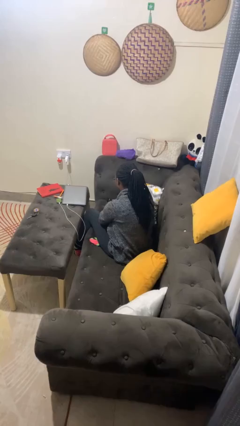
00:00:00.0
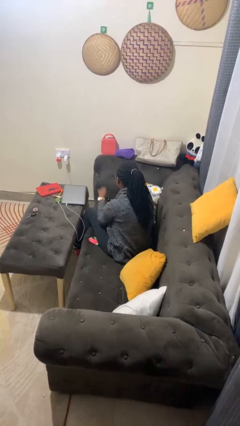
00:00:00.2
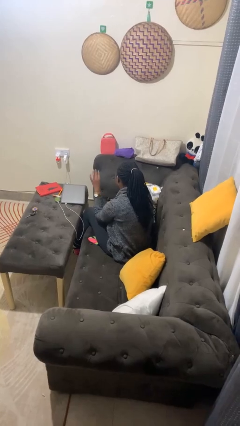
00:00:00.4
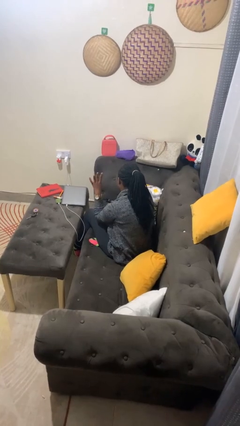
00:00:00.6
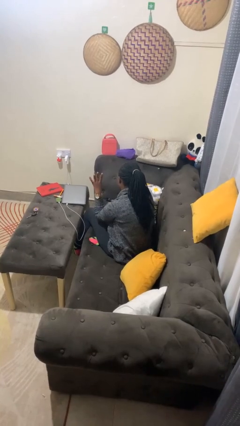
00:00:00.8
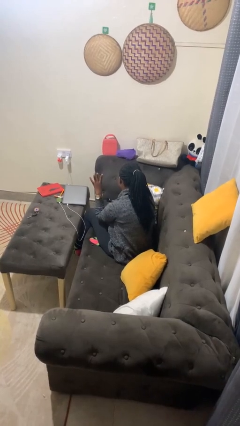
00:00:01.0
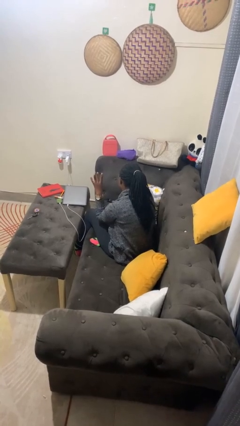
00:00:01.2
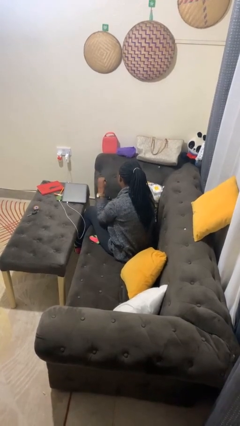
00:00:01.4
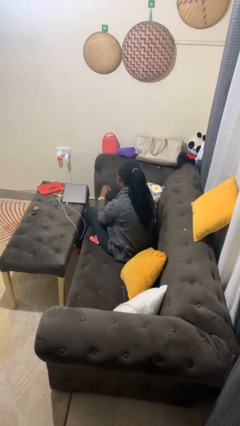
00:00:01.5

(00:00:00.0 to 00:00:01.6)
person gestures number four

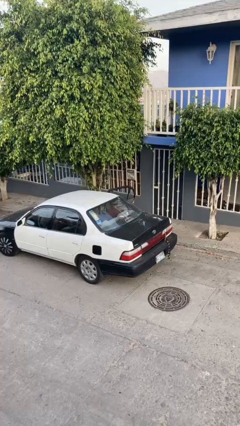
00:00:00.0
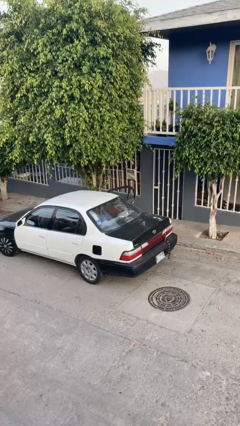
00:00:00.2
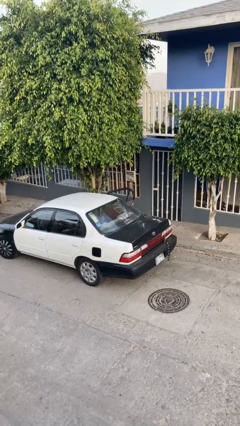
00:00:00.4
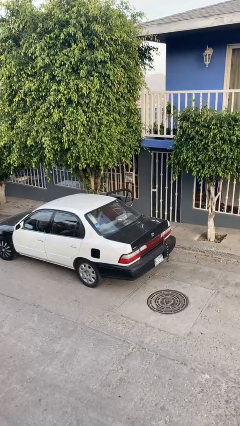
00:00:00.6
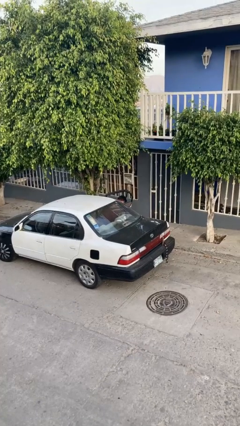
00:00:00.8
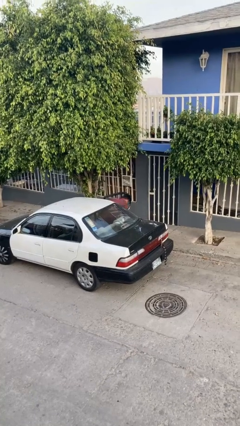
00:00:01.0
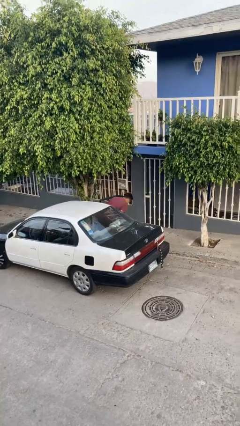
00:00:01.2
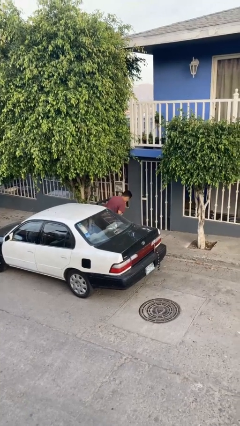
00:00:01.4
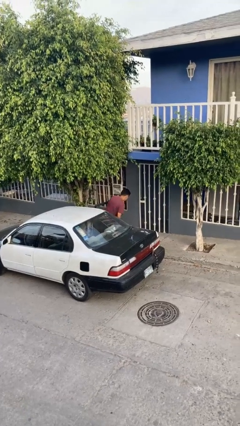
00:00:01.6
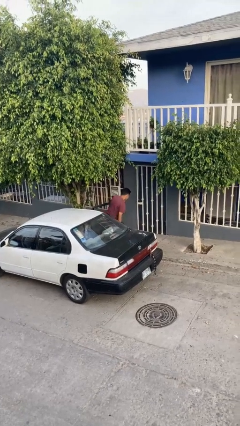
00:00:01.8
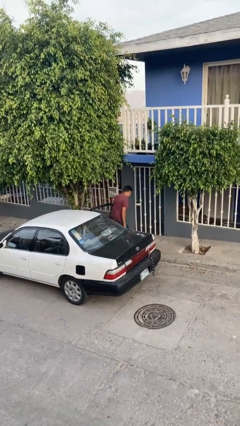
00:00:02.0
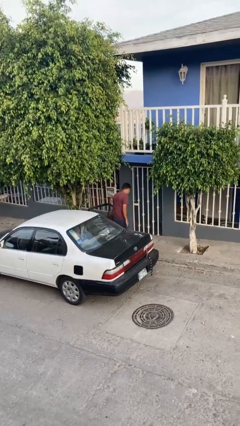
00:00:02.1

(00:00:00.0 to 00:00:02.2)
person exits car

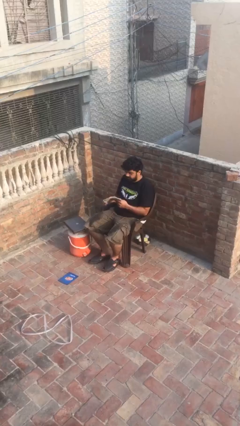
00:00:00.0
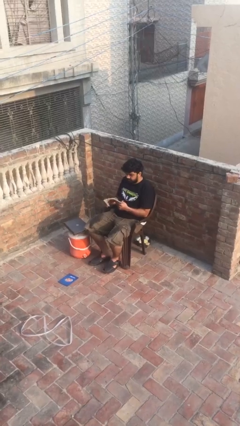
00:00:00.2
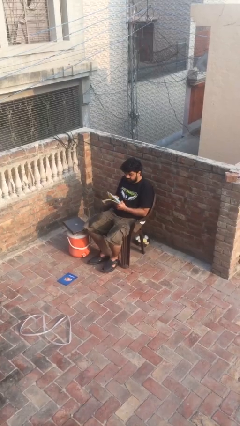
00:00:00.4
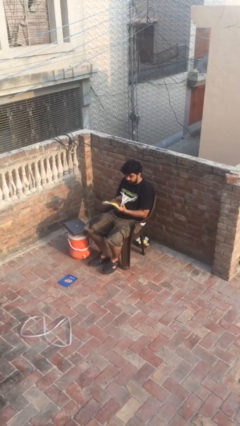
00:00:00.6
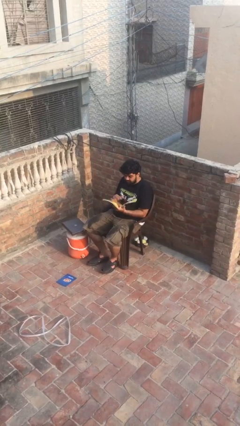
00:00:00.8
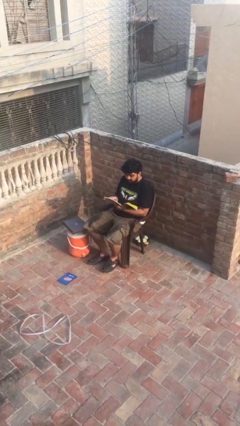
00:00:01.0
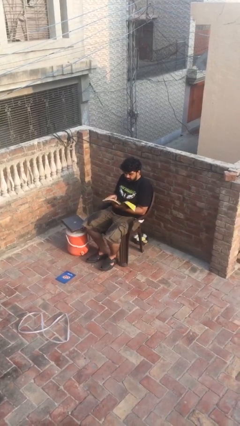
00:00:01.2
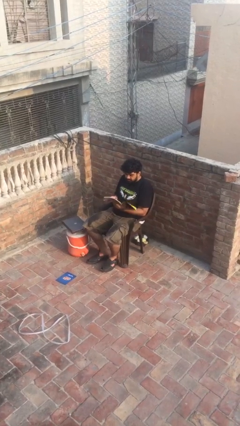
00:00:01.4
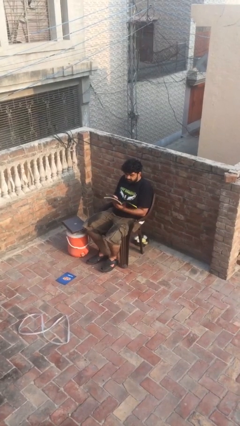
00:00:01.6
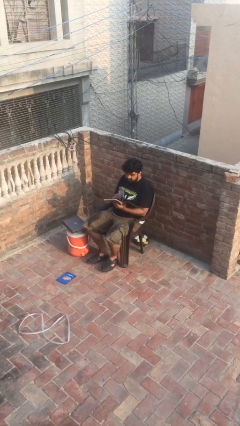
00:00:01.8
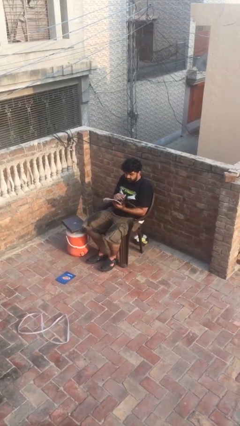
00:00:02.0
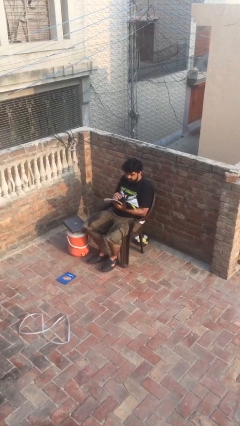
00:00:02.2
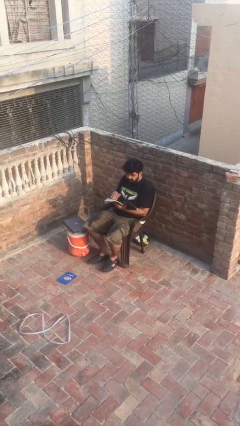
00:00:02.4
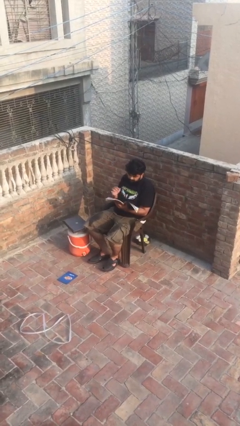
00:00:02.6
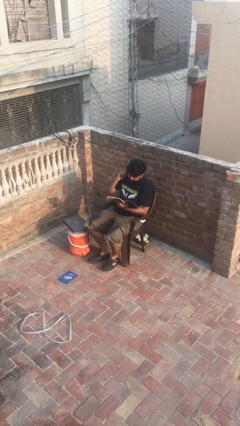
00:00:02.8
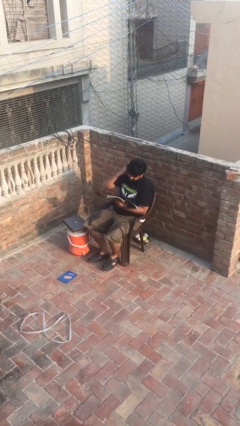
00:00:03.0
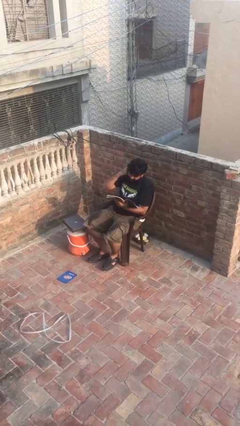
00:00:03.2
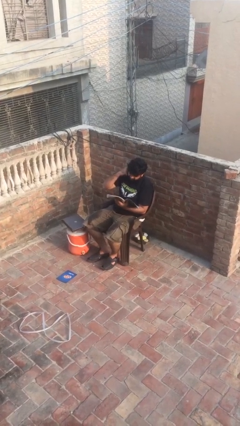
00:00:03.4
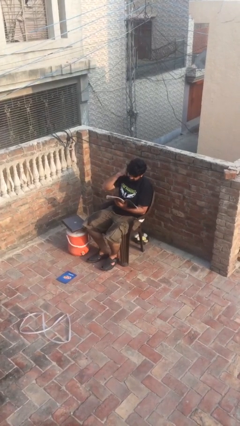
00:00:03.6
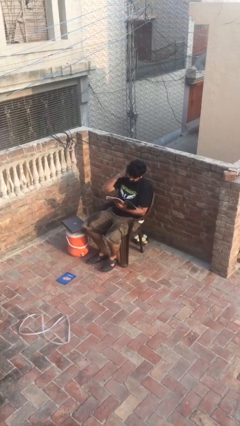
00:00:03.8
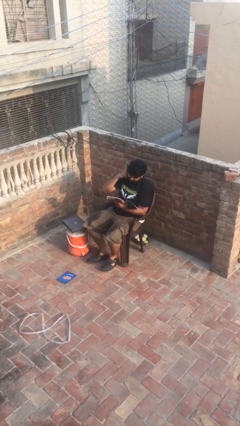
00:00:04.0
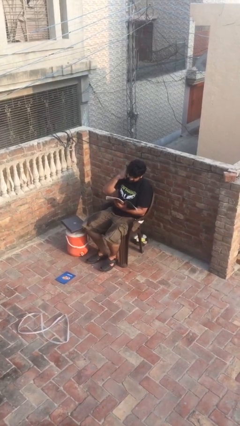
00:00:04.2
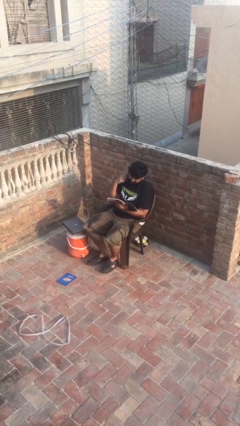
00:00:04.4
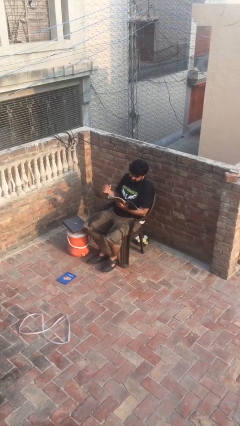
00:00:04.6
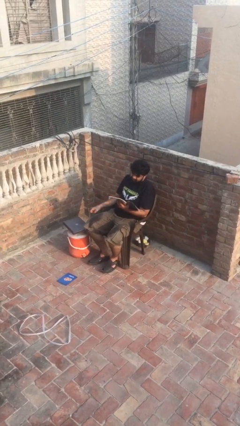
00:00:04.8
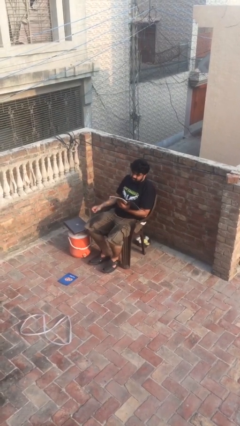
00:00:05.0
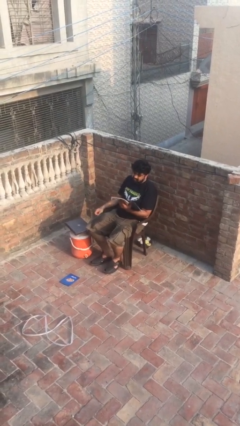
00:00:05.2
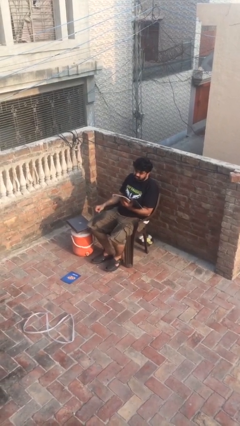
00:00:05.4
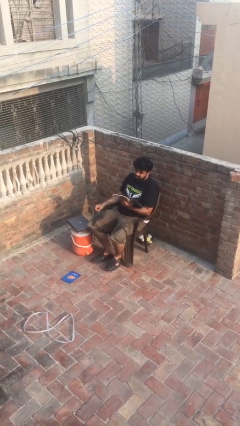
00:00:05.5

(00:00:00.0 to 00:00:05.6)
person reads document

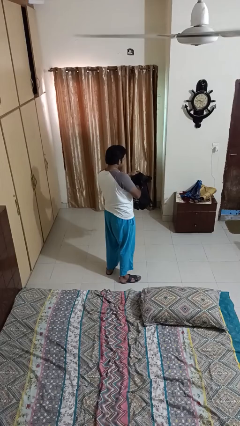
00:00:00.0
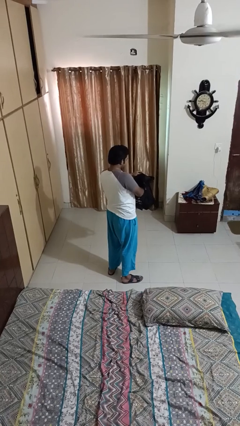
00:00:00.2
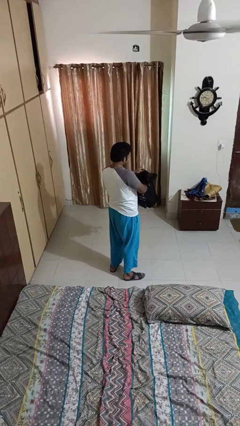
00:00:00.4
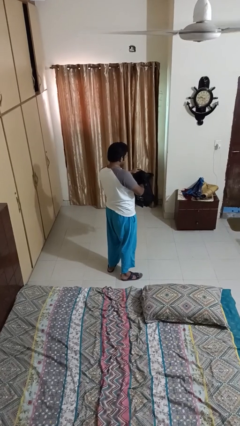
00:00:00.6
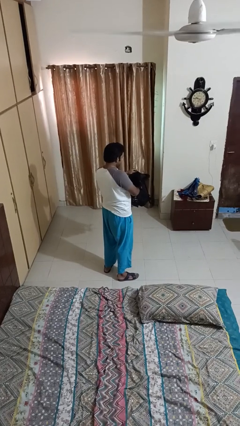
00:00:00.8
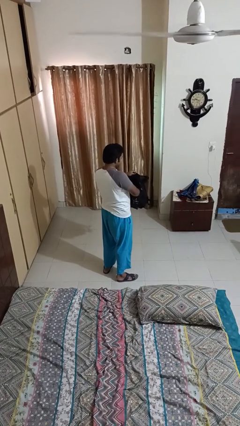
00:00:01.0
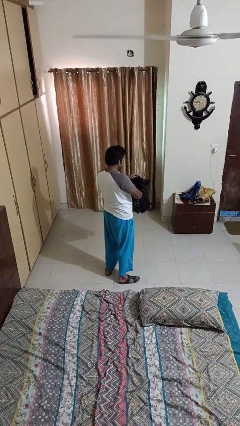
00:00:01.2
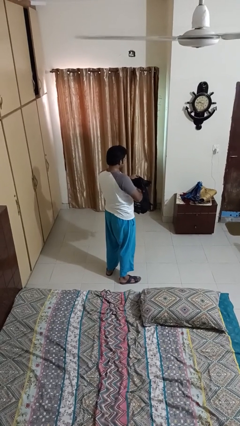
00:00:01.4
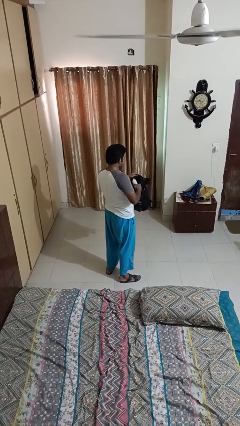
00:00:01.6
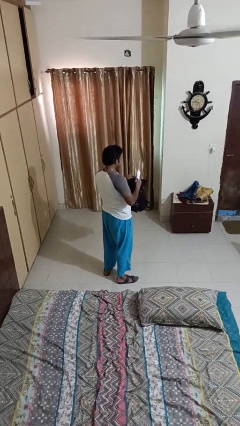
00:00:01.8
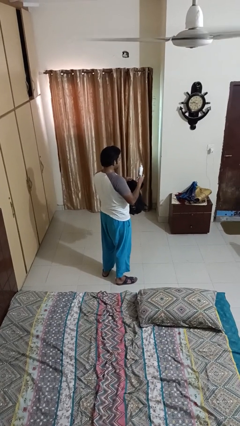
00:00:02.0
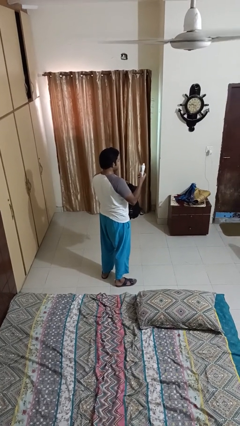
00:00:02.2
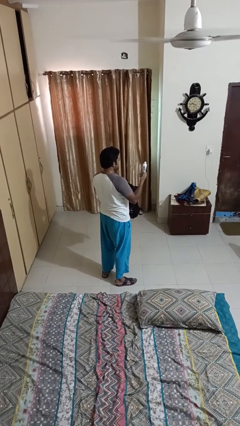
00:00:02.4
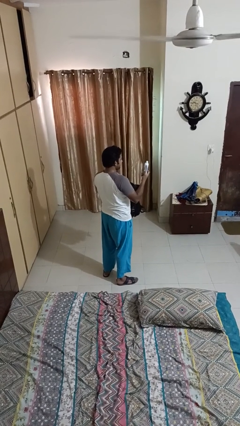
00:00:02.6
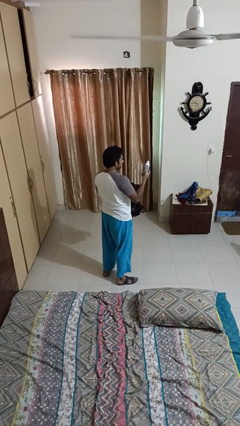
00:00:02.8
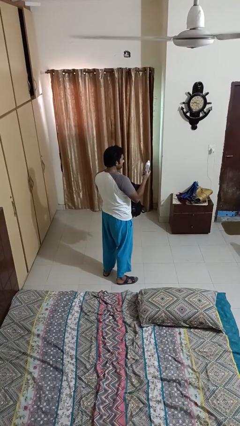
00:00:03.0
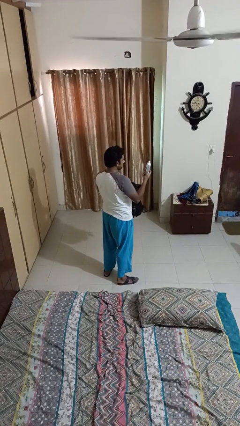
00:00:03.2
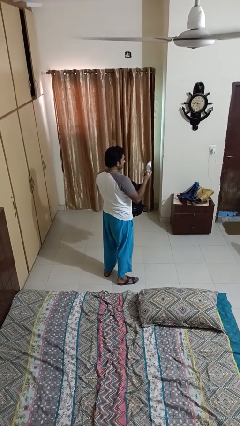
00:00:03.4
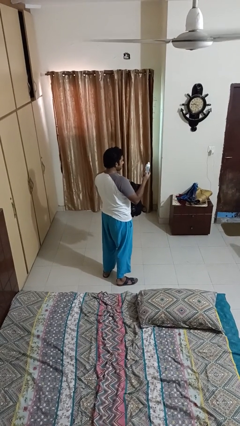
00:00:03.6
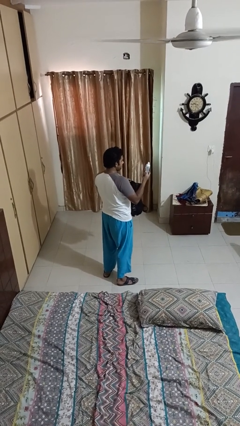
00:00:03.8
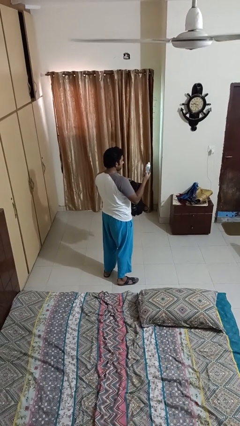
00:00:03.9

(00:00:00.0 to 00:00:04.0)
person lies down on couch

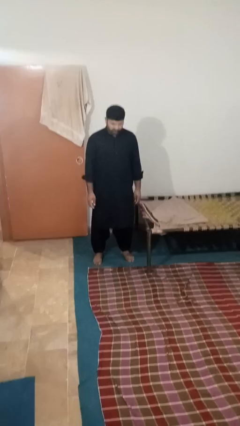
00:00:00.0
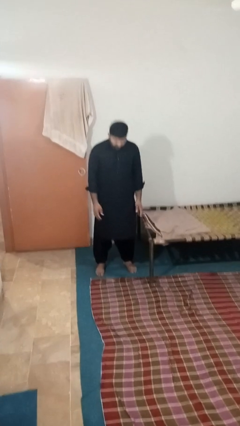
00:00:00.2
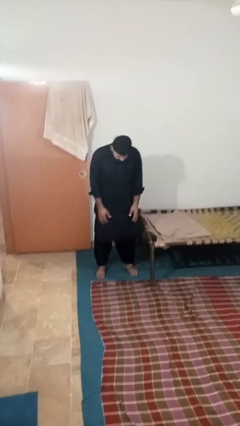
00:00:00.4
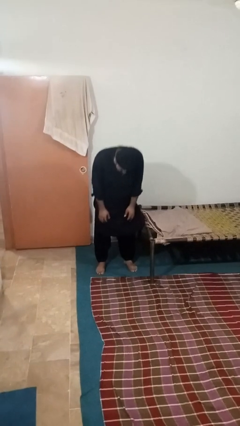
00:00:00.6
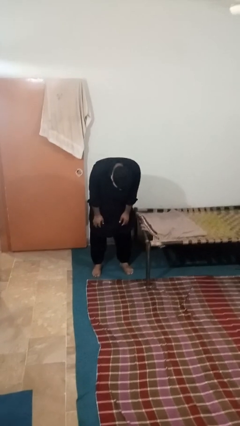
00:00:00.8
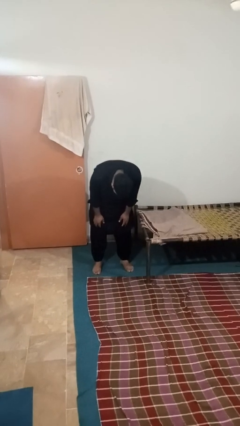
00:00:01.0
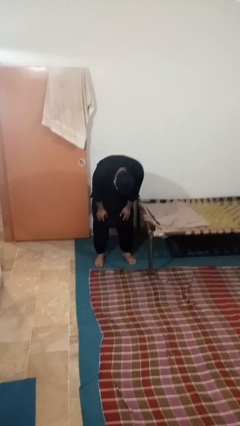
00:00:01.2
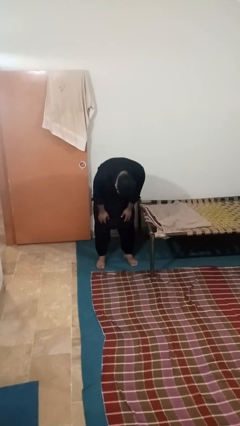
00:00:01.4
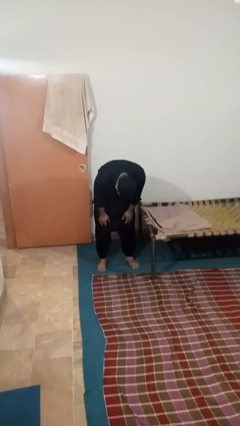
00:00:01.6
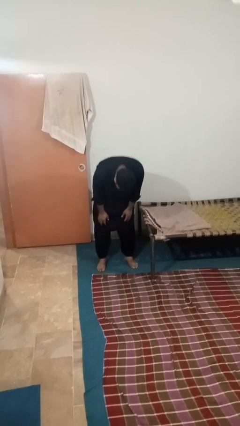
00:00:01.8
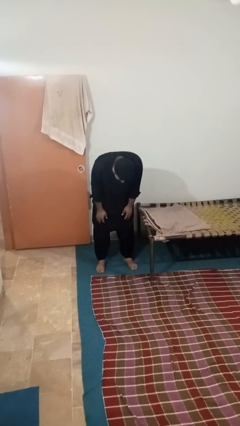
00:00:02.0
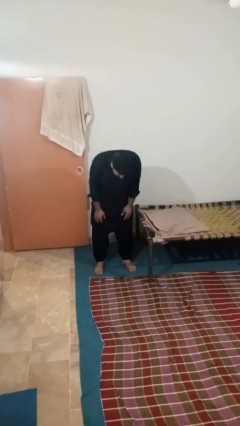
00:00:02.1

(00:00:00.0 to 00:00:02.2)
person bows

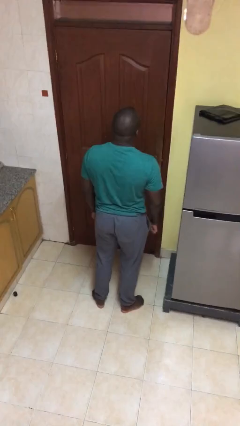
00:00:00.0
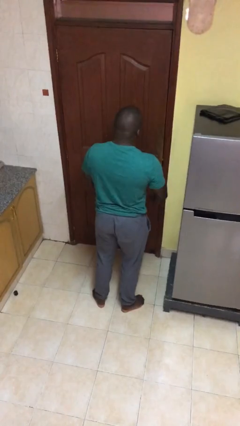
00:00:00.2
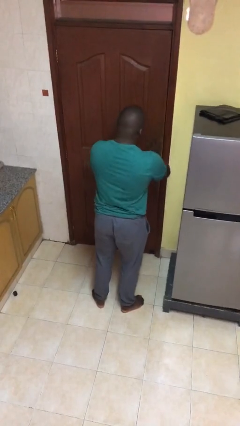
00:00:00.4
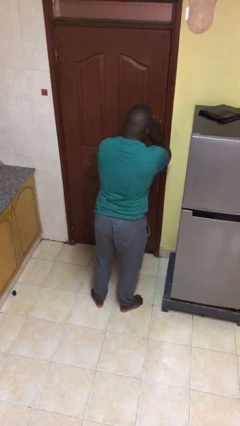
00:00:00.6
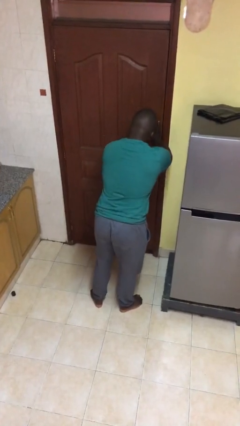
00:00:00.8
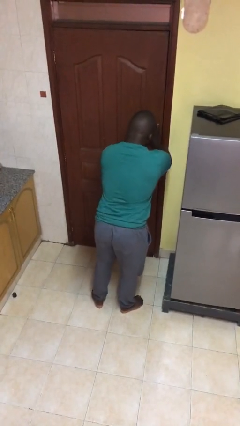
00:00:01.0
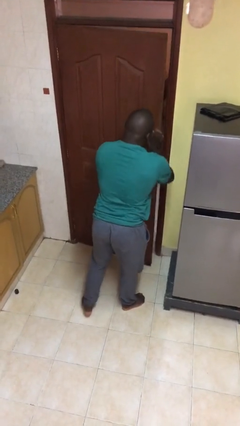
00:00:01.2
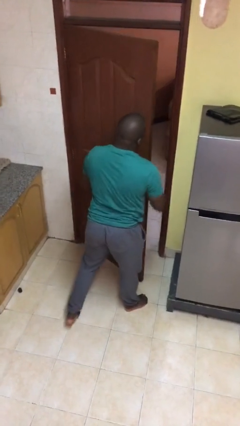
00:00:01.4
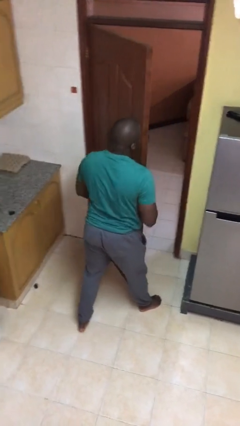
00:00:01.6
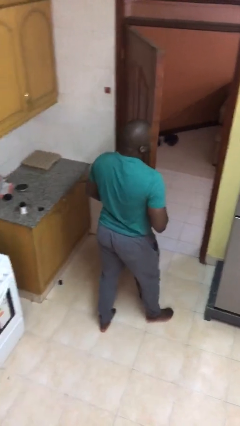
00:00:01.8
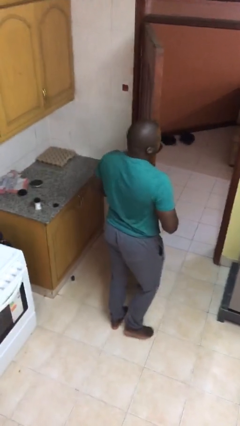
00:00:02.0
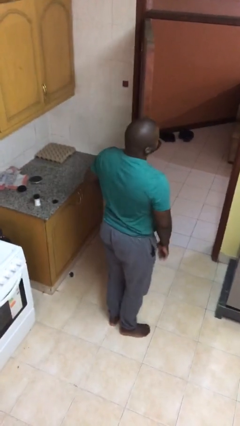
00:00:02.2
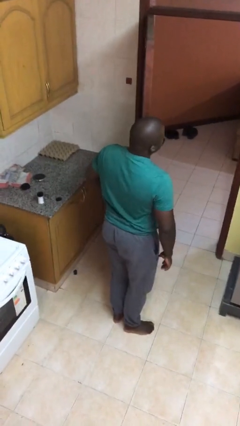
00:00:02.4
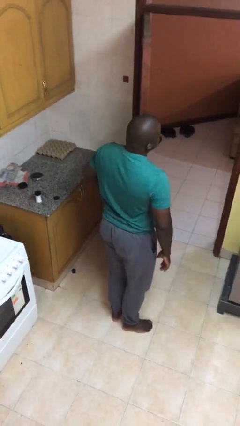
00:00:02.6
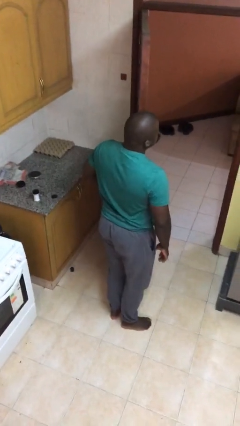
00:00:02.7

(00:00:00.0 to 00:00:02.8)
person opens facility door
